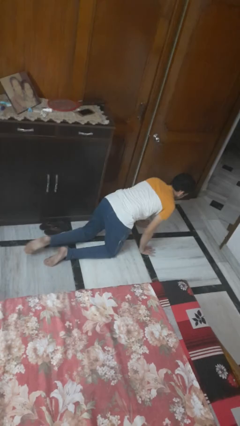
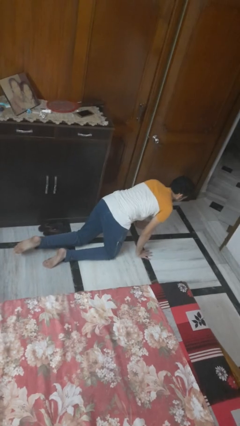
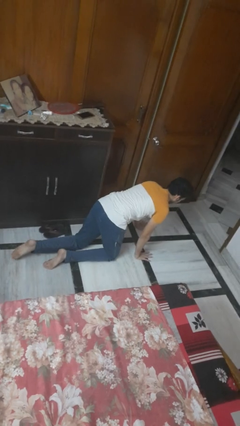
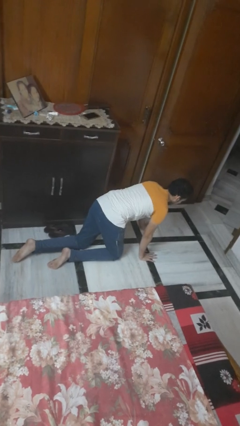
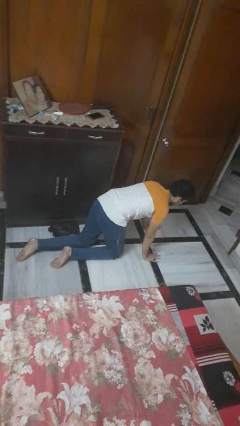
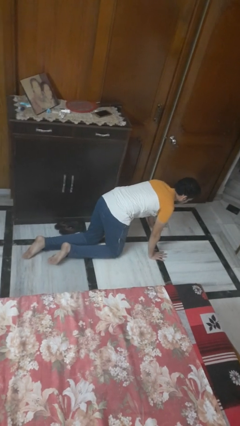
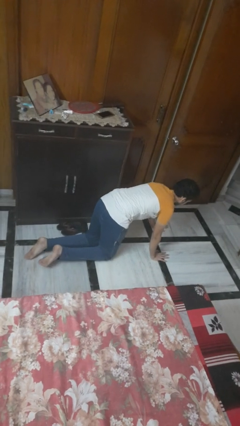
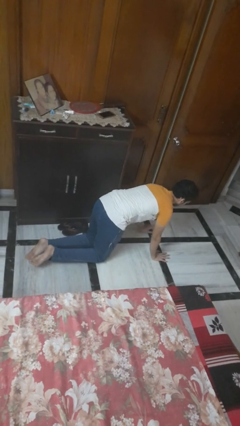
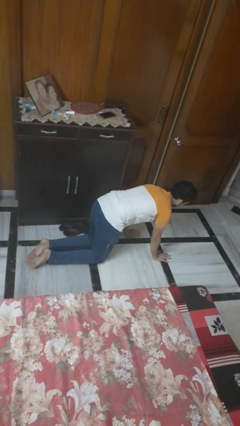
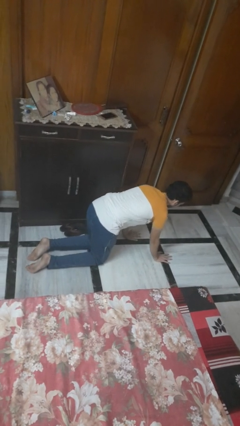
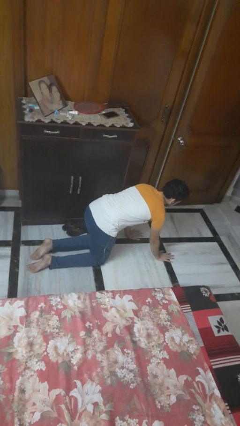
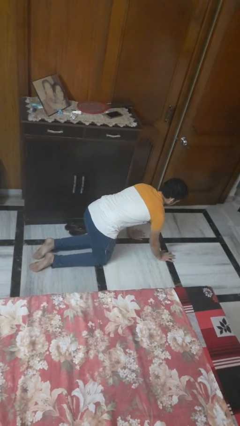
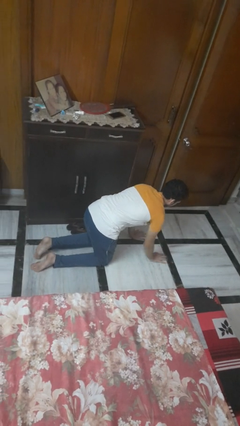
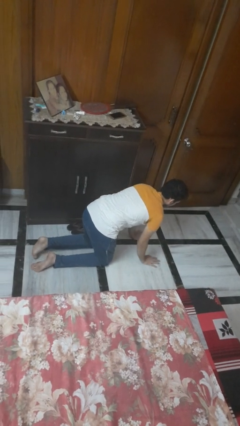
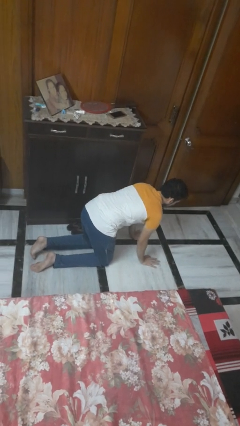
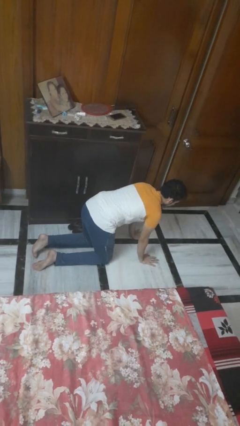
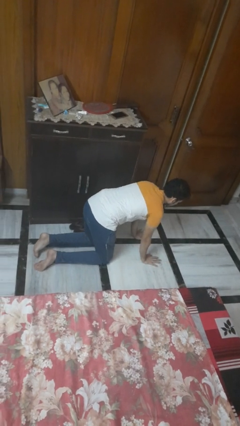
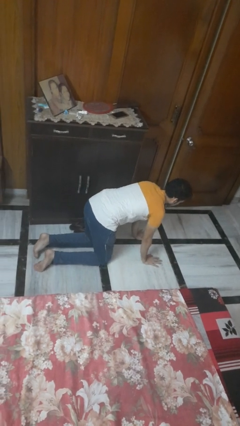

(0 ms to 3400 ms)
person crawls

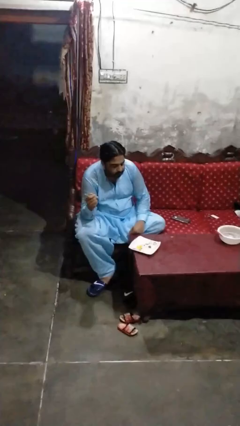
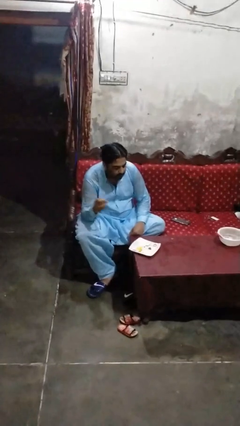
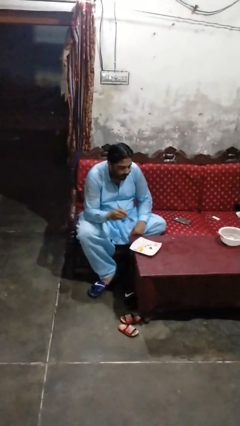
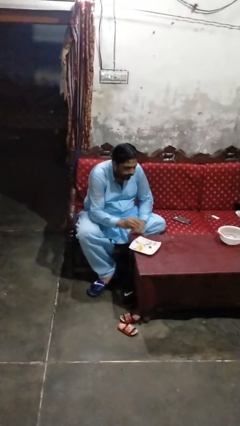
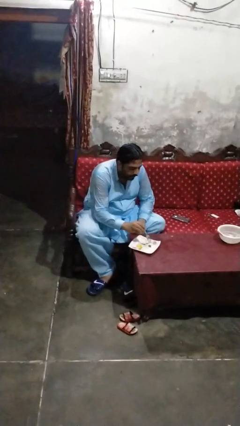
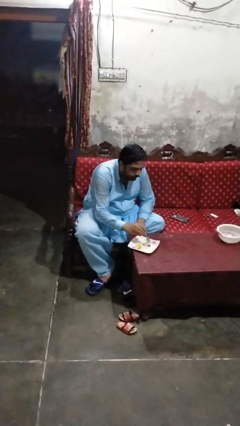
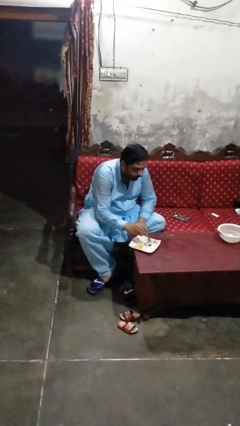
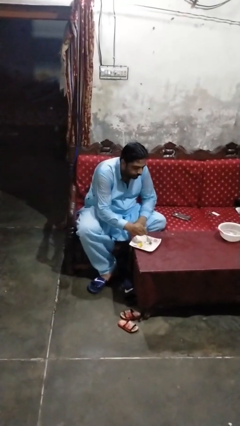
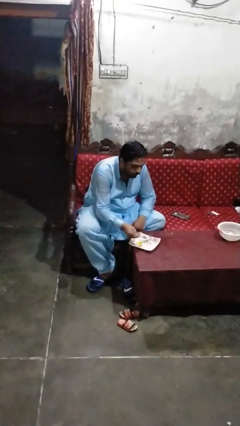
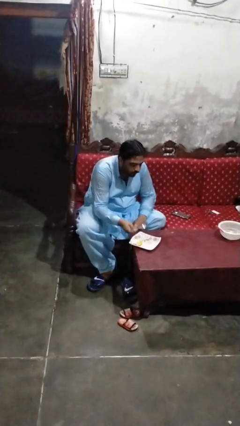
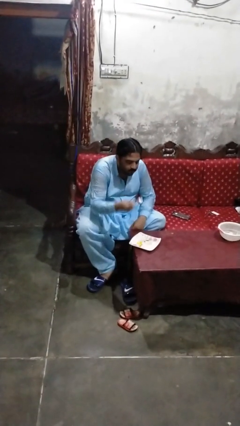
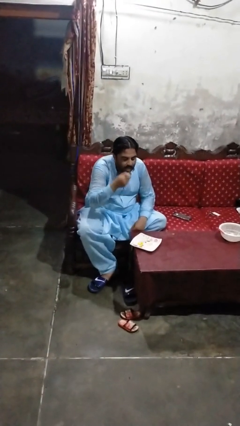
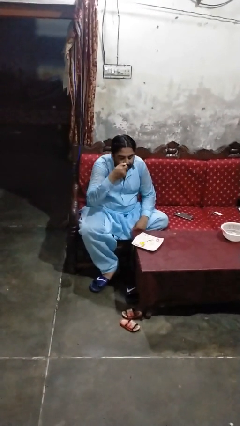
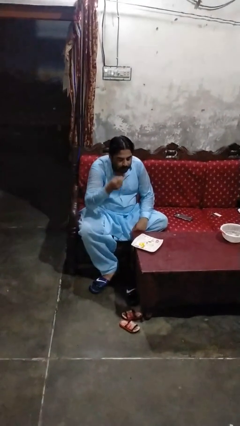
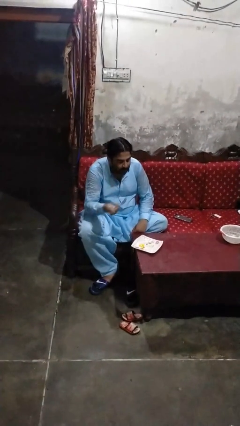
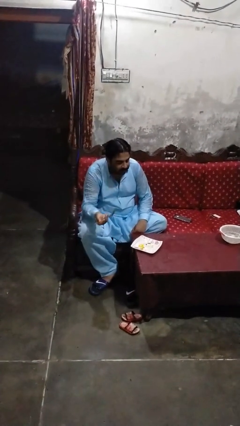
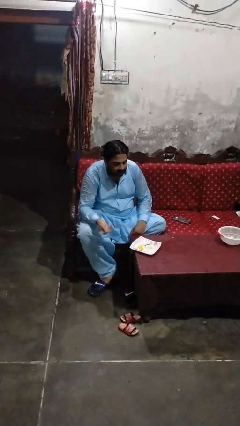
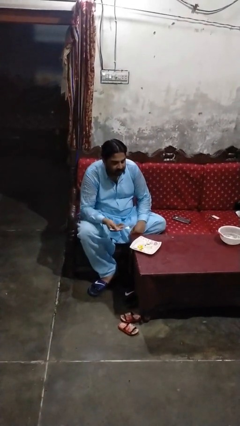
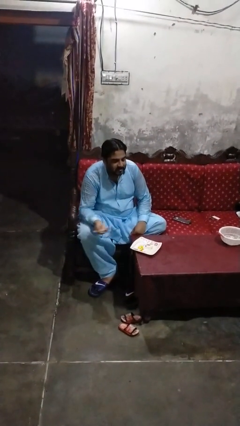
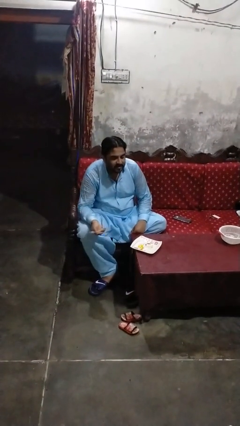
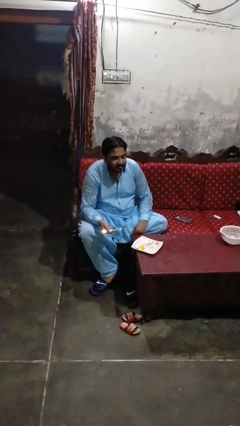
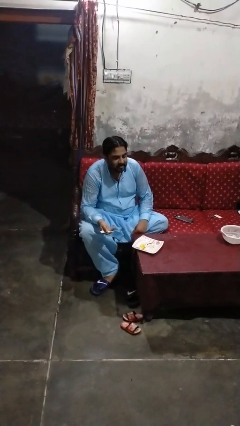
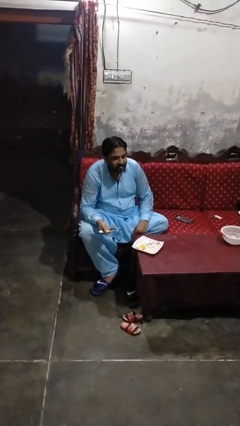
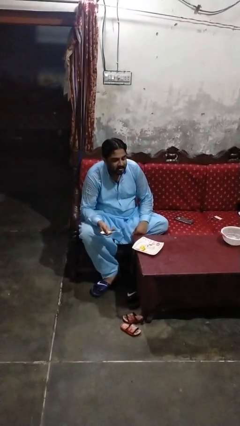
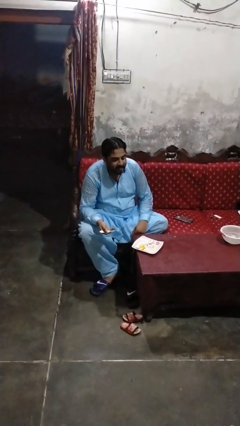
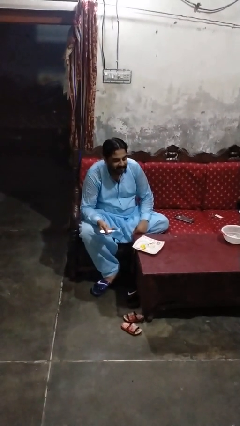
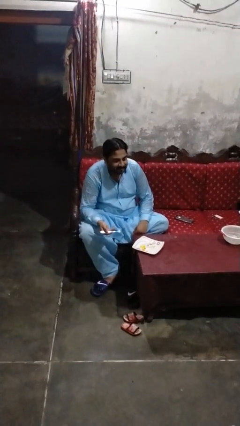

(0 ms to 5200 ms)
person eats with utensil

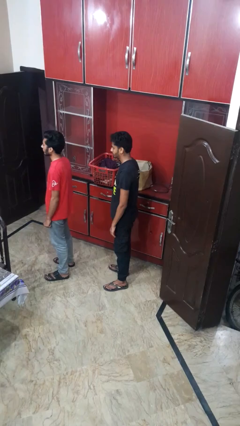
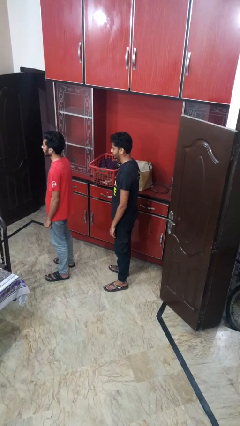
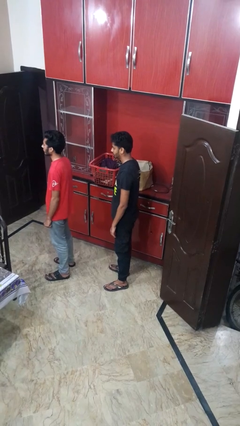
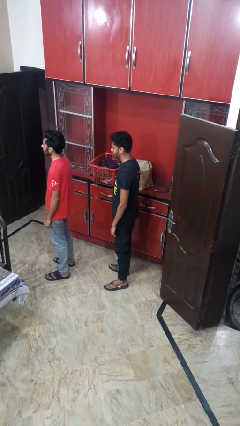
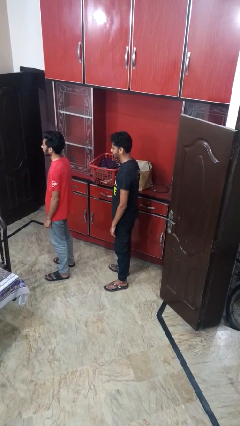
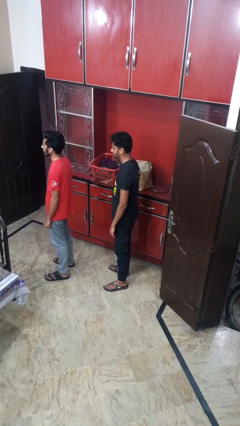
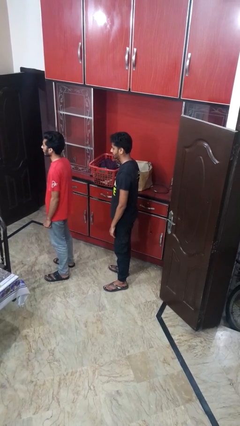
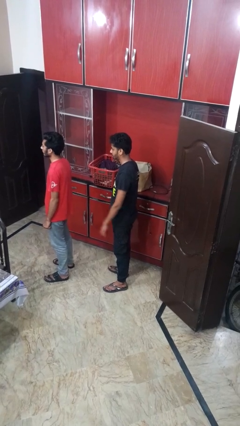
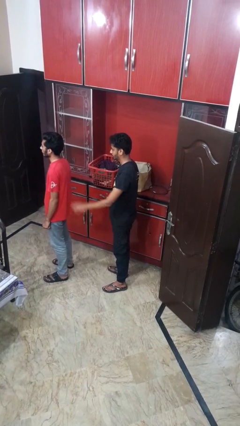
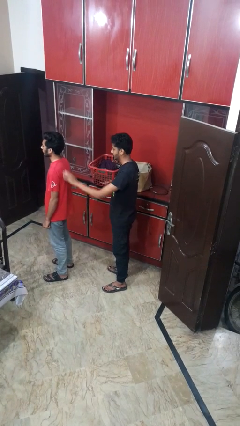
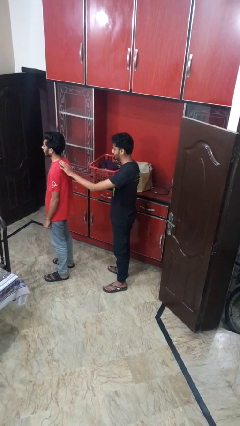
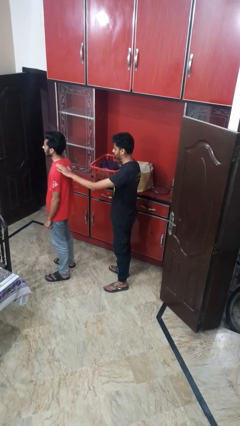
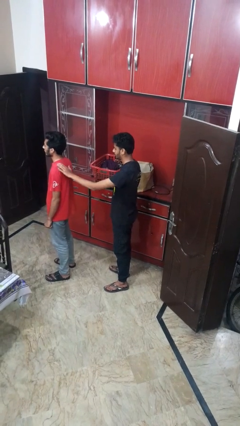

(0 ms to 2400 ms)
person gestures come here

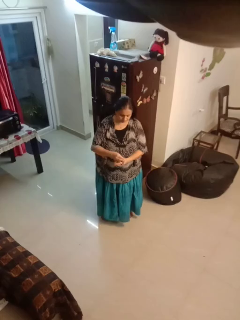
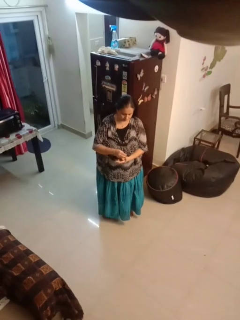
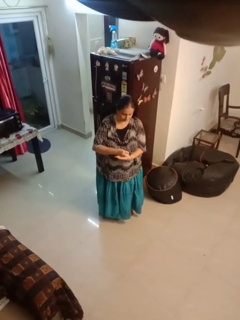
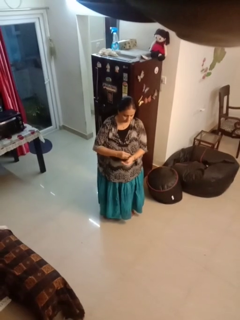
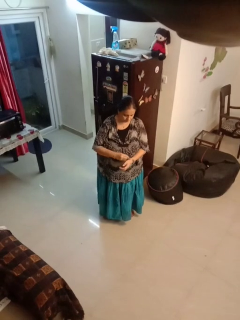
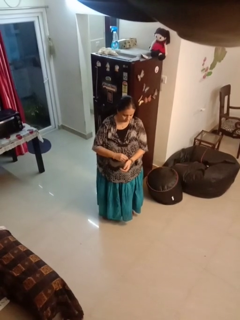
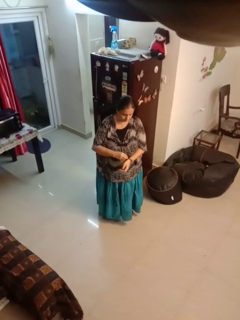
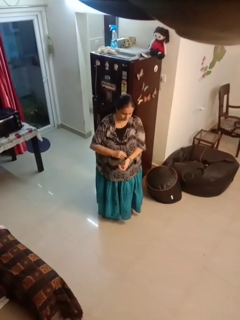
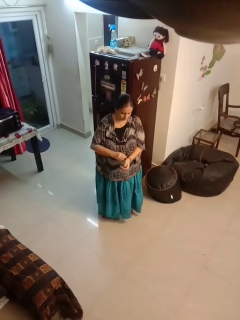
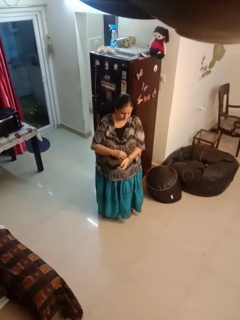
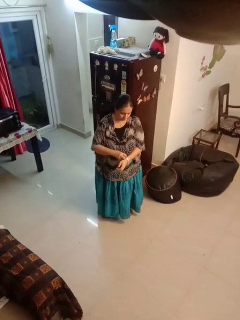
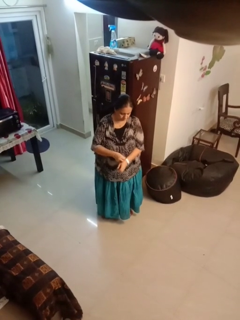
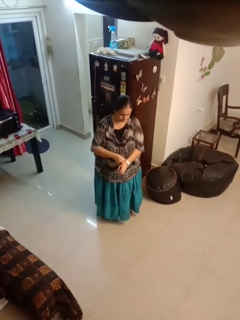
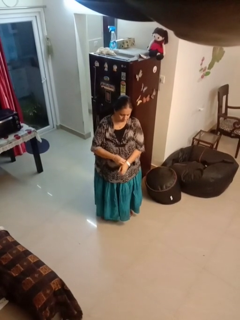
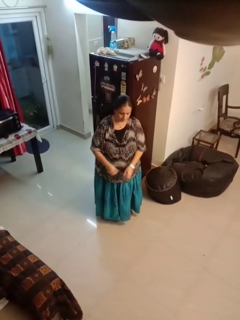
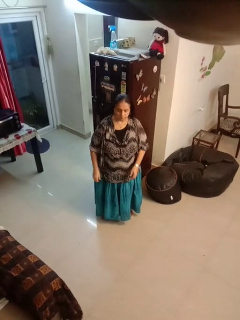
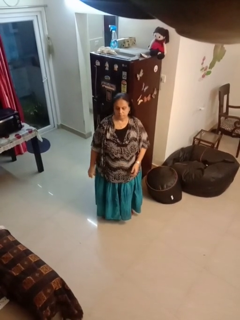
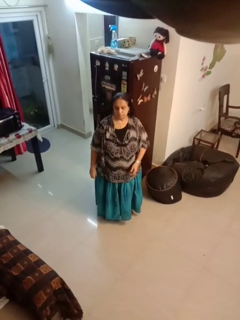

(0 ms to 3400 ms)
person puts on wristwatch

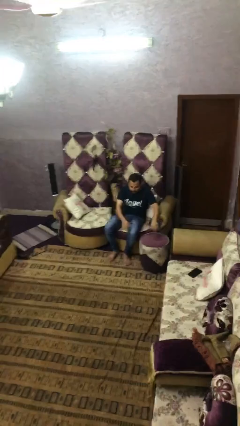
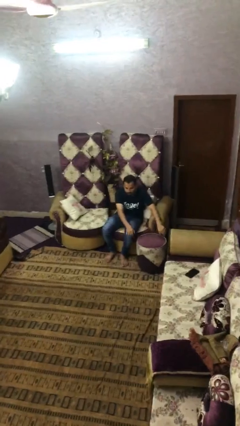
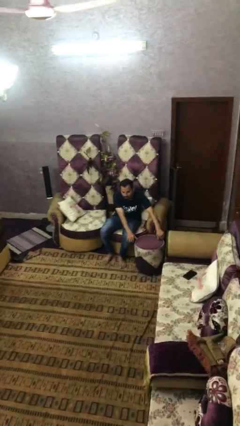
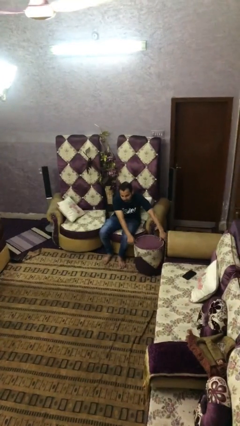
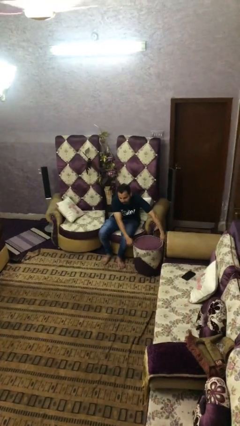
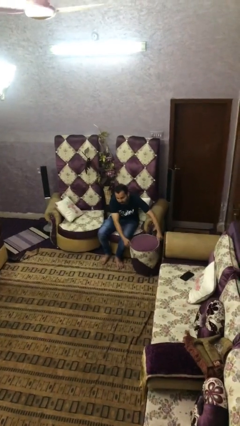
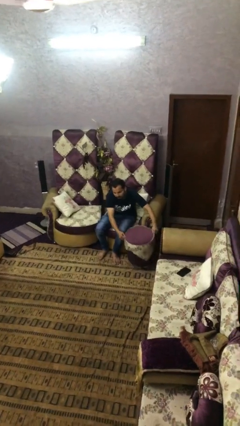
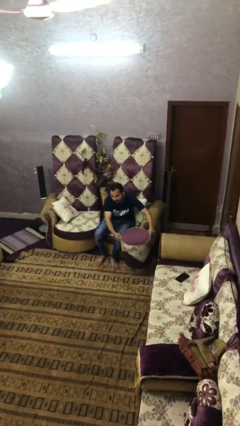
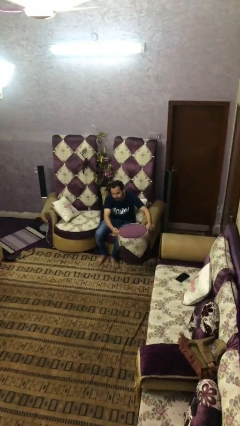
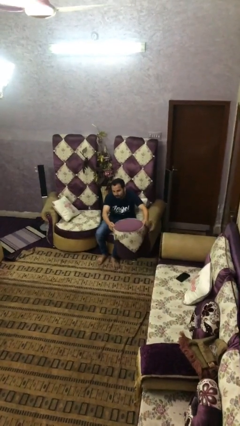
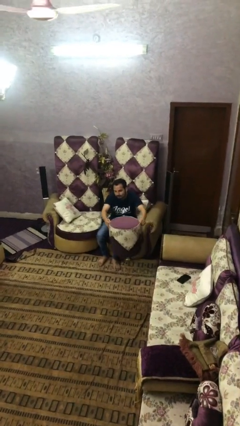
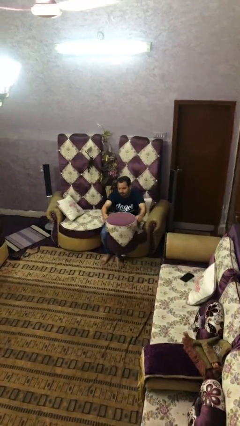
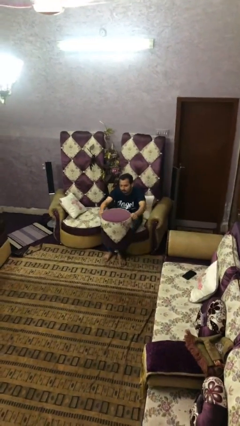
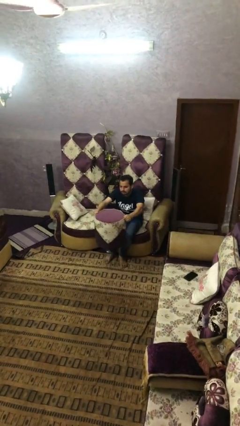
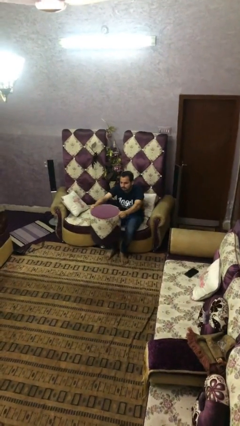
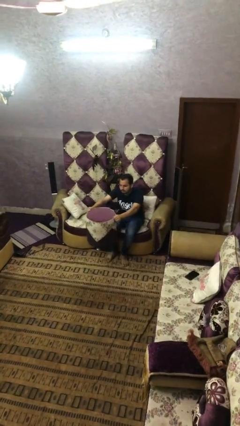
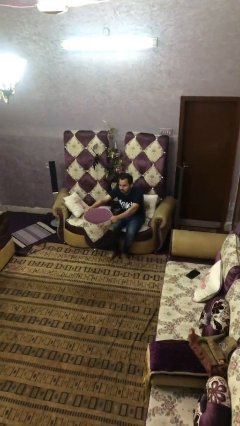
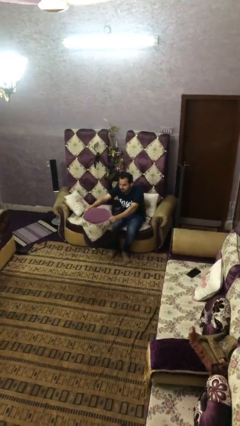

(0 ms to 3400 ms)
person picks up object from floor

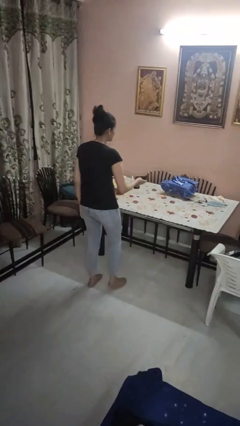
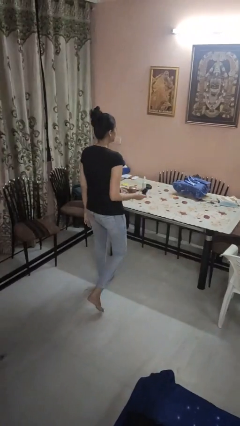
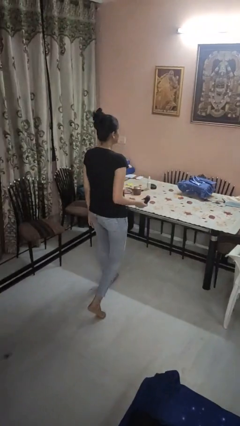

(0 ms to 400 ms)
person picks up object from table
